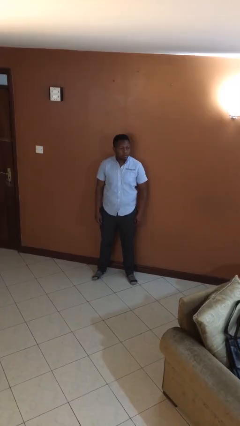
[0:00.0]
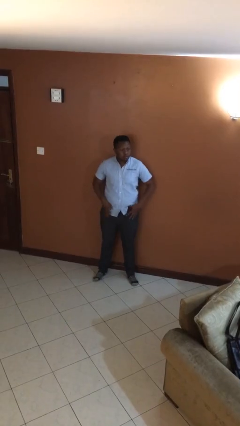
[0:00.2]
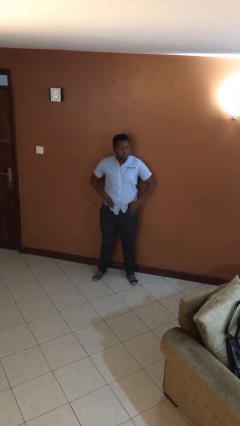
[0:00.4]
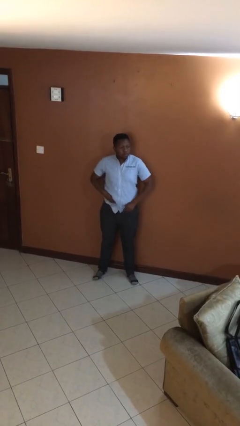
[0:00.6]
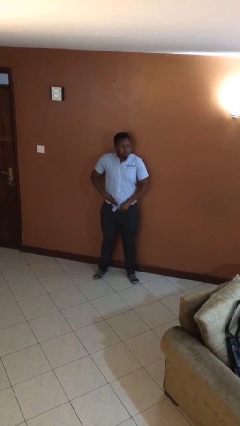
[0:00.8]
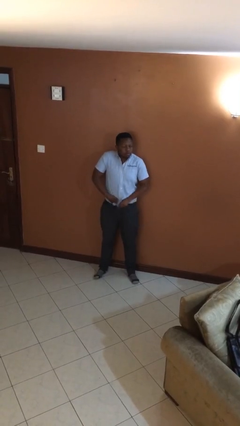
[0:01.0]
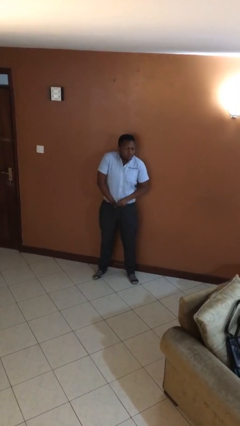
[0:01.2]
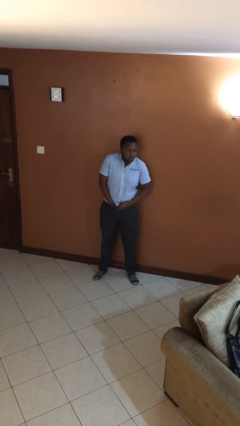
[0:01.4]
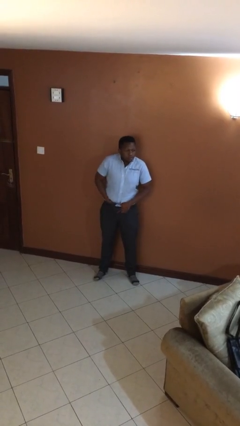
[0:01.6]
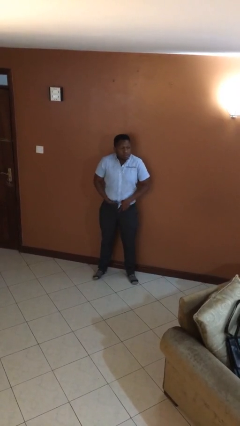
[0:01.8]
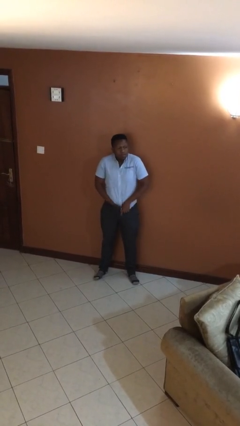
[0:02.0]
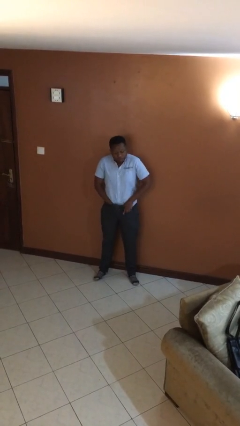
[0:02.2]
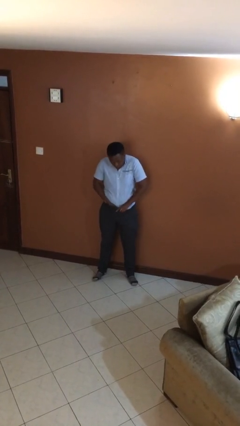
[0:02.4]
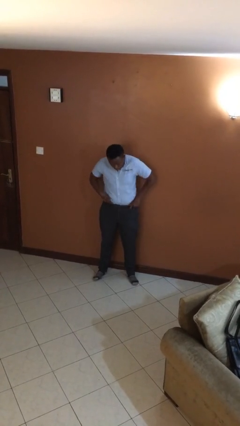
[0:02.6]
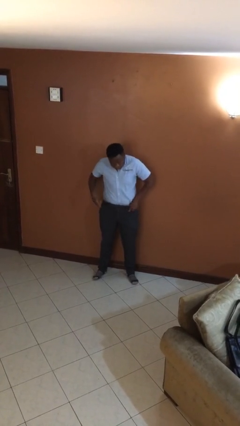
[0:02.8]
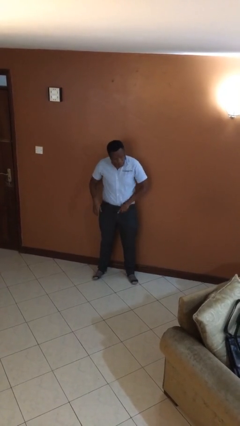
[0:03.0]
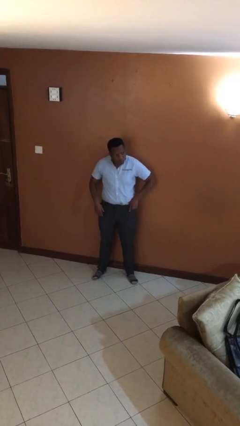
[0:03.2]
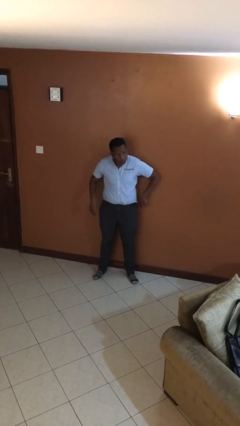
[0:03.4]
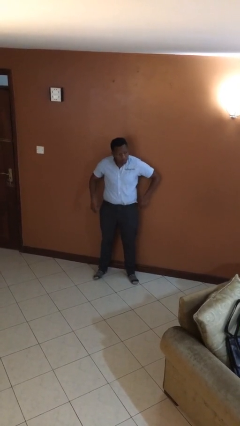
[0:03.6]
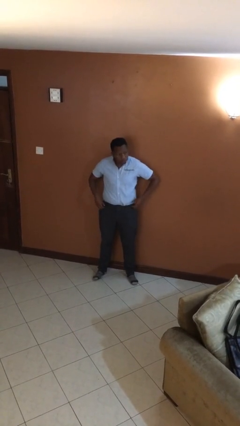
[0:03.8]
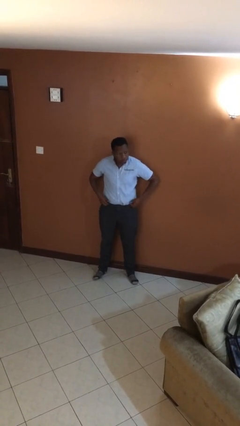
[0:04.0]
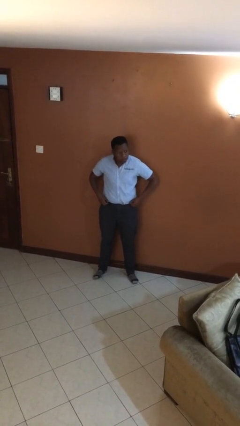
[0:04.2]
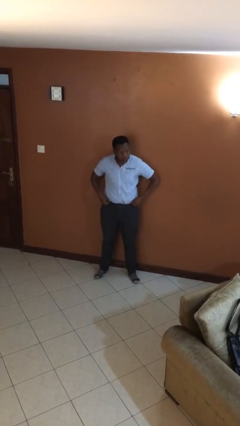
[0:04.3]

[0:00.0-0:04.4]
person tucks in shirt

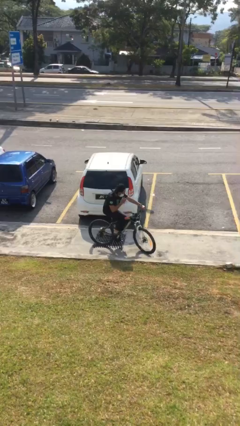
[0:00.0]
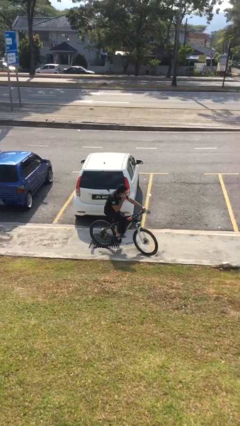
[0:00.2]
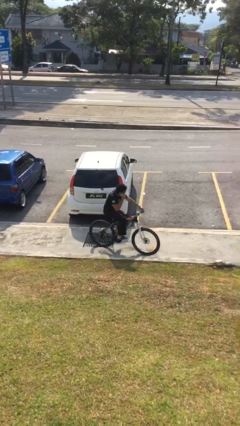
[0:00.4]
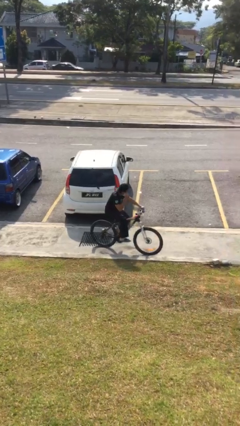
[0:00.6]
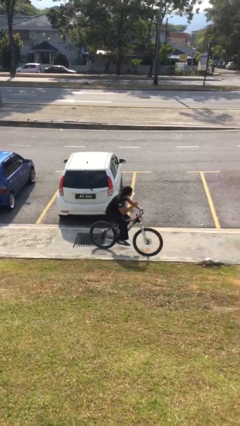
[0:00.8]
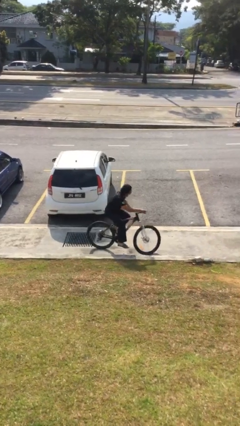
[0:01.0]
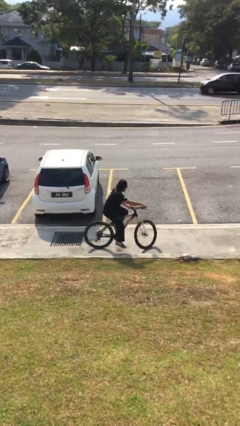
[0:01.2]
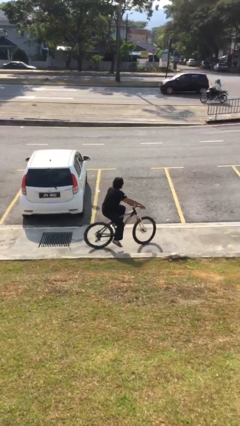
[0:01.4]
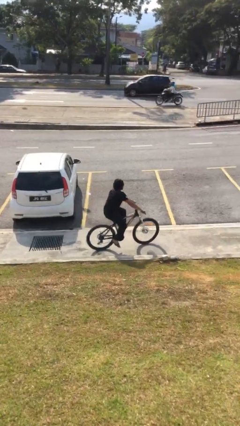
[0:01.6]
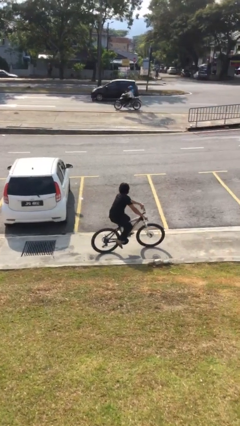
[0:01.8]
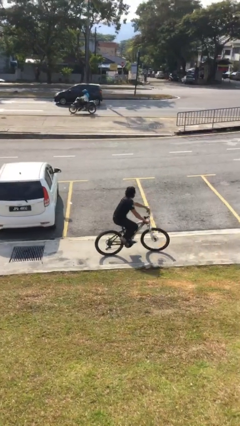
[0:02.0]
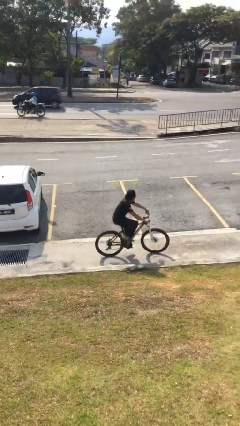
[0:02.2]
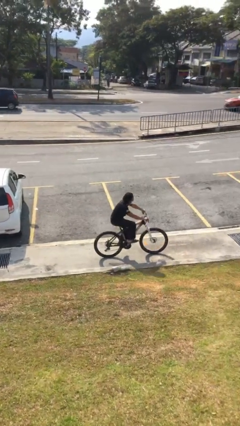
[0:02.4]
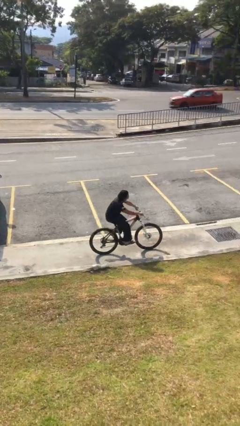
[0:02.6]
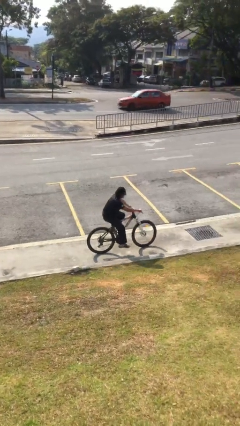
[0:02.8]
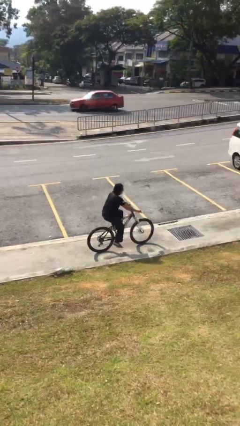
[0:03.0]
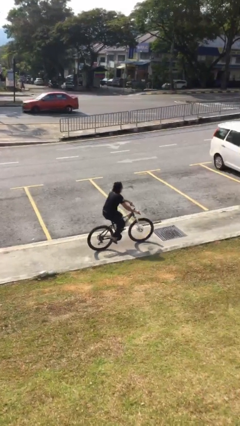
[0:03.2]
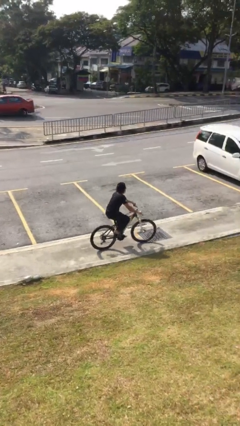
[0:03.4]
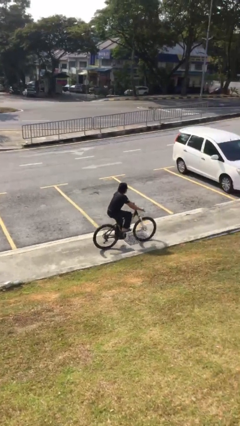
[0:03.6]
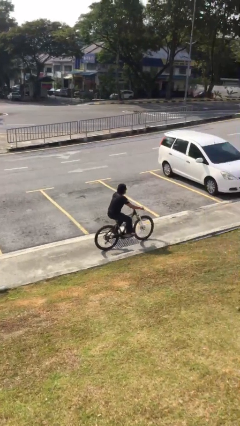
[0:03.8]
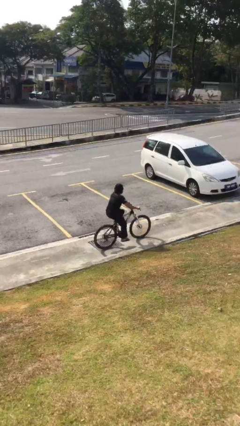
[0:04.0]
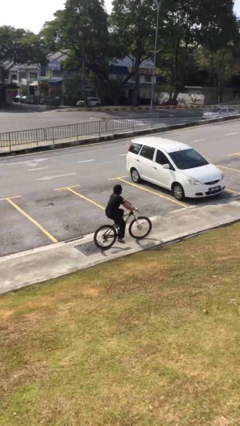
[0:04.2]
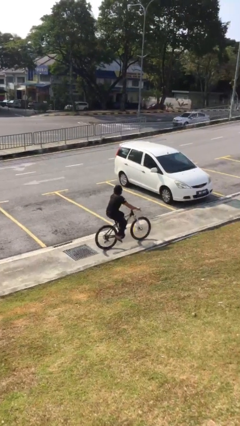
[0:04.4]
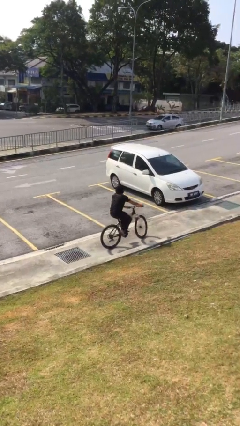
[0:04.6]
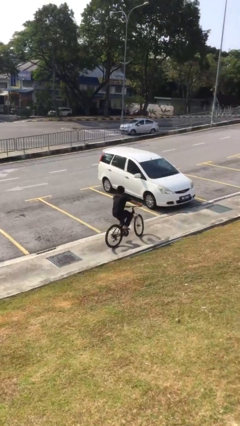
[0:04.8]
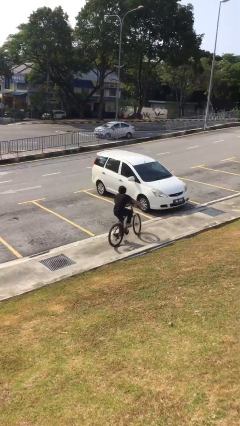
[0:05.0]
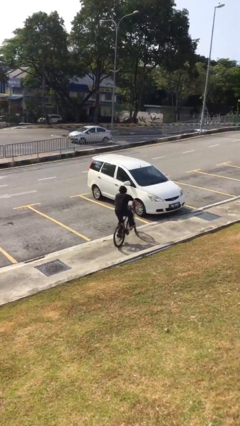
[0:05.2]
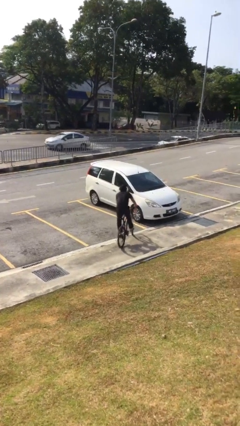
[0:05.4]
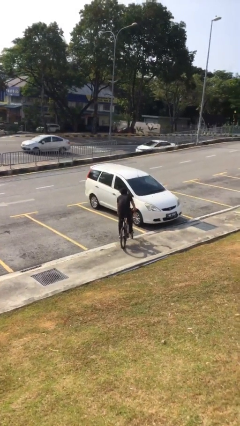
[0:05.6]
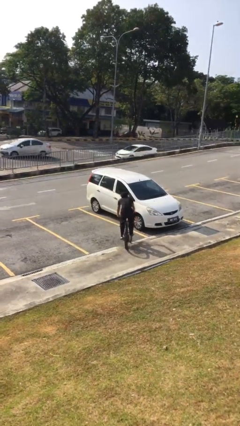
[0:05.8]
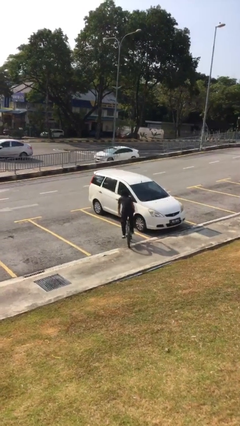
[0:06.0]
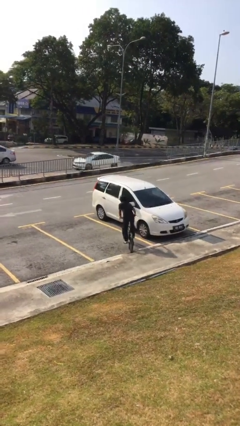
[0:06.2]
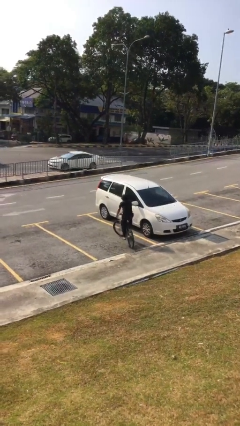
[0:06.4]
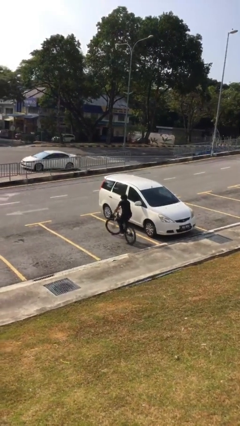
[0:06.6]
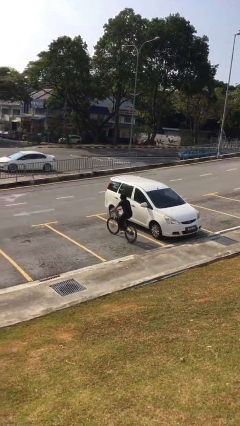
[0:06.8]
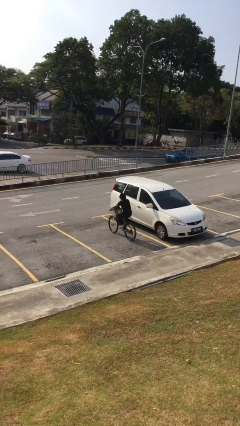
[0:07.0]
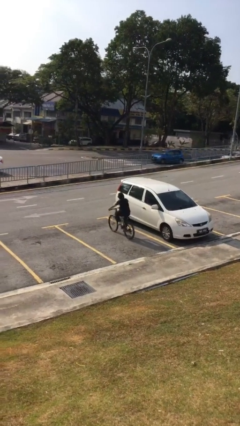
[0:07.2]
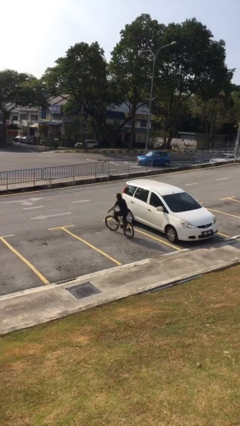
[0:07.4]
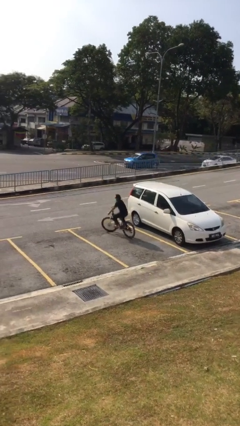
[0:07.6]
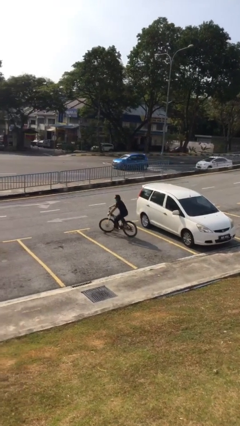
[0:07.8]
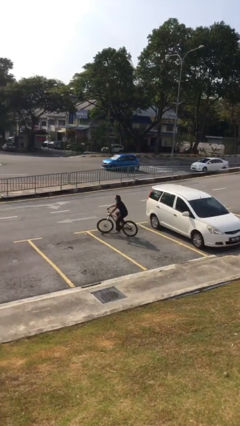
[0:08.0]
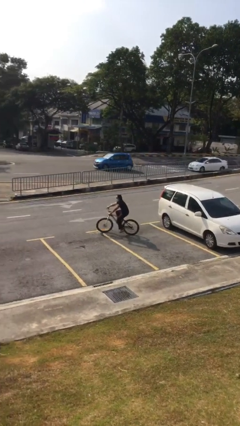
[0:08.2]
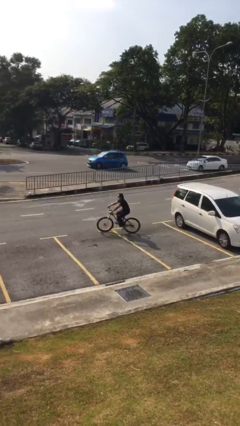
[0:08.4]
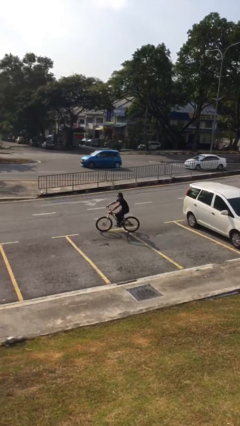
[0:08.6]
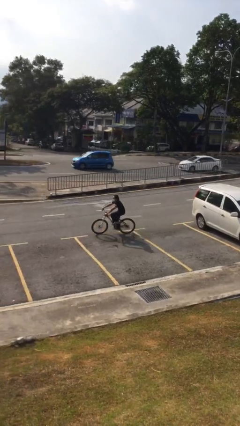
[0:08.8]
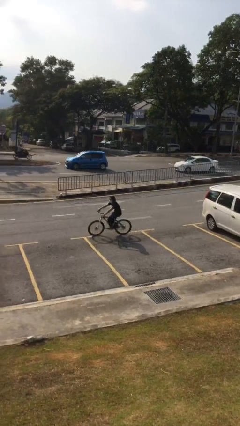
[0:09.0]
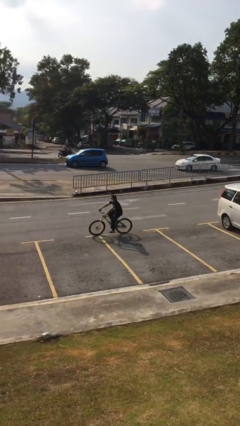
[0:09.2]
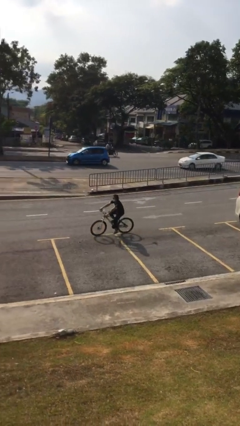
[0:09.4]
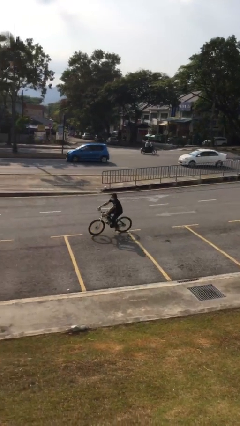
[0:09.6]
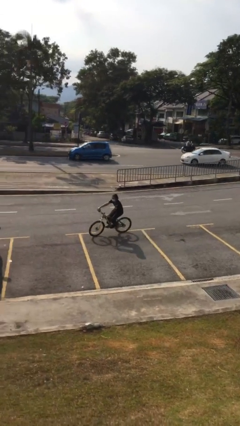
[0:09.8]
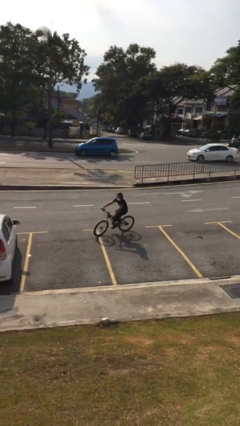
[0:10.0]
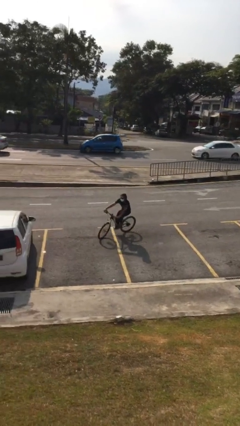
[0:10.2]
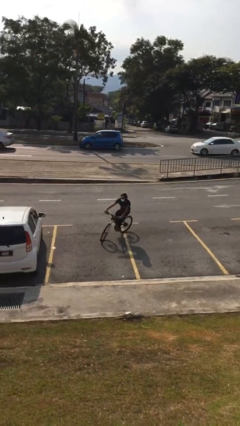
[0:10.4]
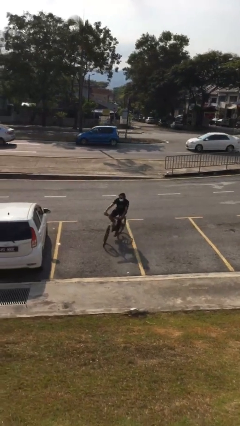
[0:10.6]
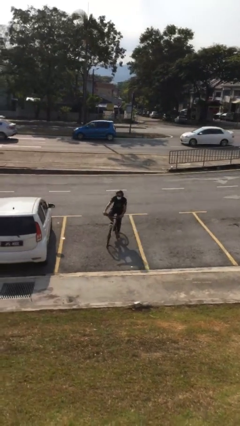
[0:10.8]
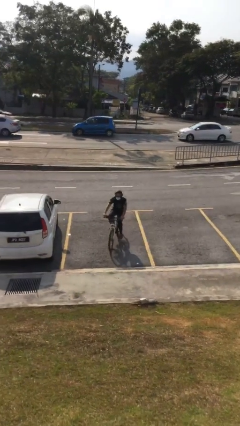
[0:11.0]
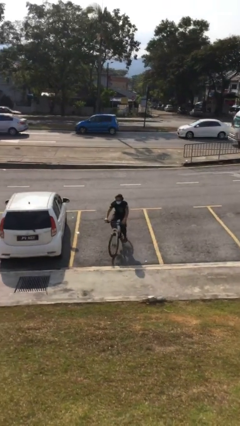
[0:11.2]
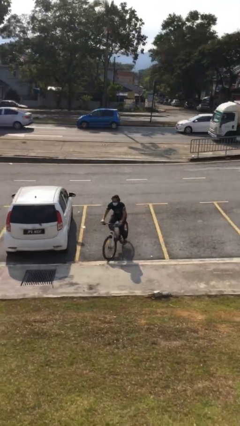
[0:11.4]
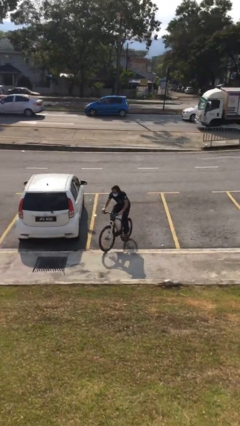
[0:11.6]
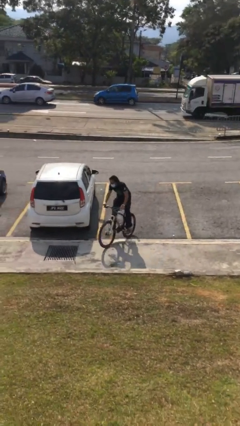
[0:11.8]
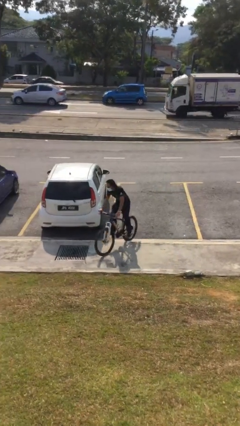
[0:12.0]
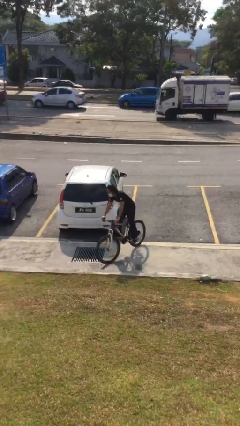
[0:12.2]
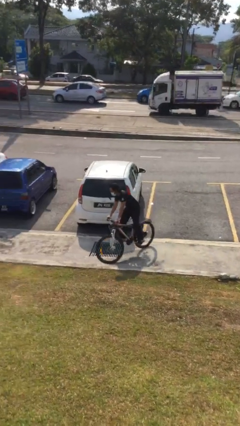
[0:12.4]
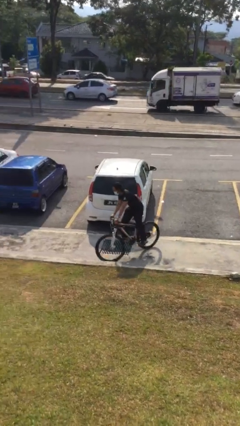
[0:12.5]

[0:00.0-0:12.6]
person rides bicycle

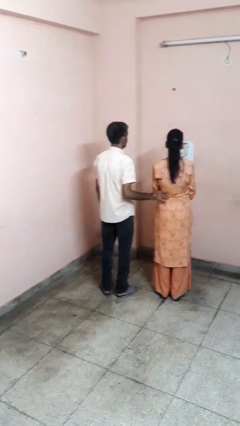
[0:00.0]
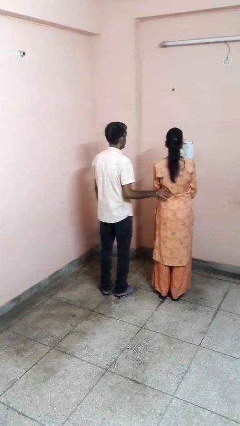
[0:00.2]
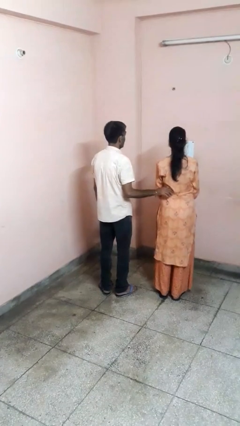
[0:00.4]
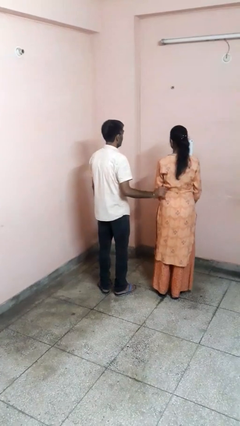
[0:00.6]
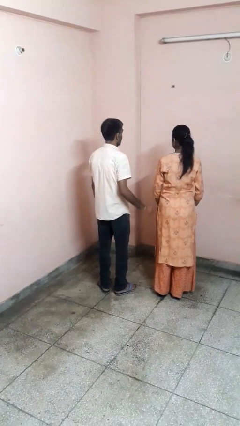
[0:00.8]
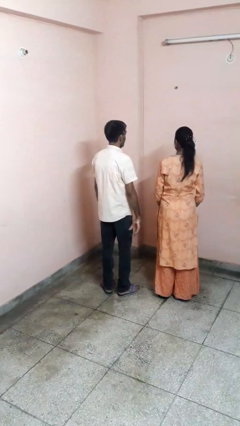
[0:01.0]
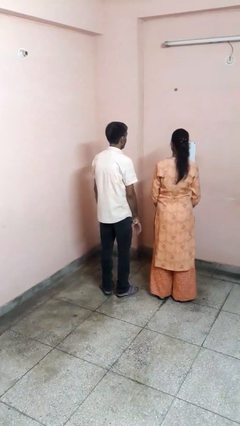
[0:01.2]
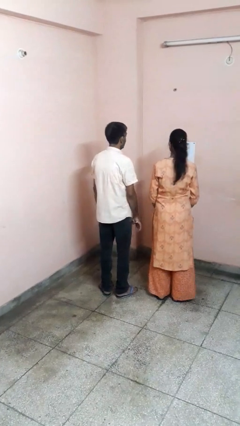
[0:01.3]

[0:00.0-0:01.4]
person tickles person
